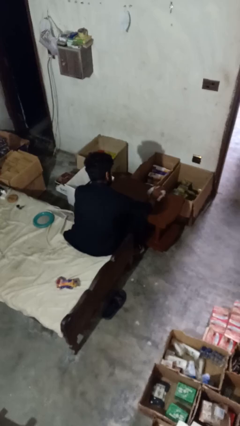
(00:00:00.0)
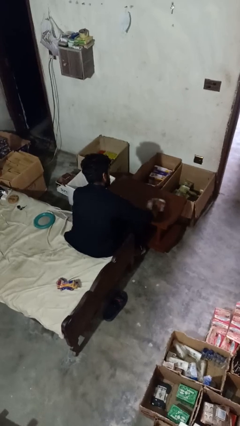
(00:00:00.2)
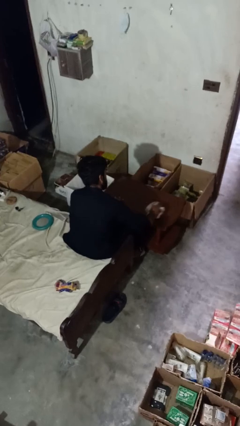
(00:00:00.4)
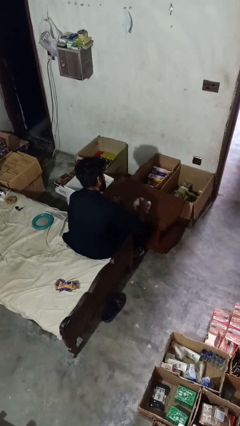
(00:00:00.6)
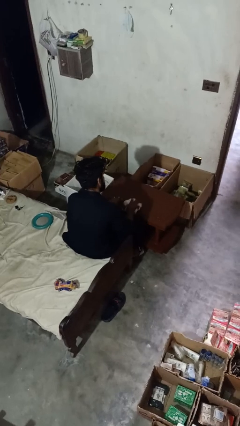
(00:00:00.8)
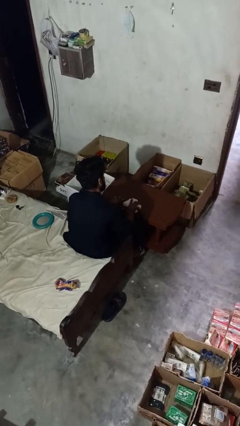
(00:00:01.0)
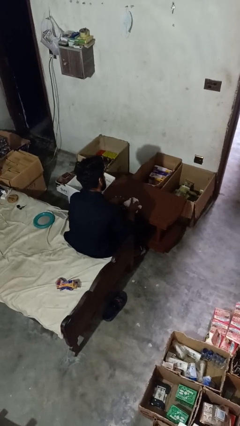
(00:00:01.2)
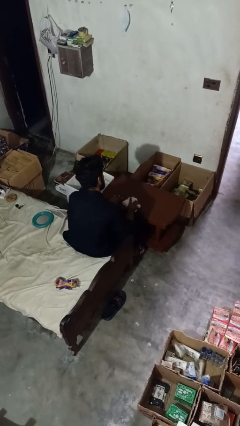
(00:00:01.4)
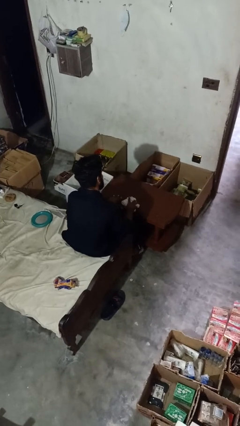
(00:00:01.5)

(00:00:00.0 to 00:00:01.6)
person cleans table with rag

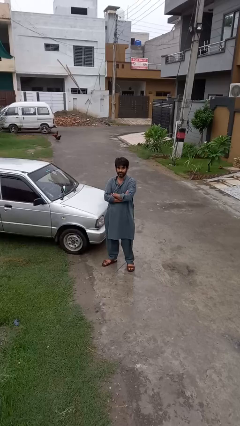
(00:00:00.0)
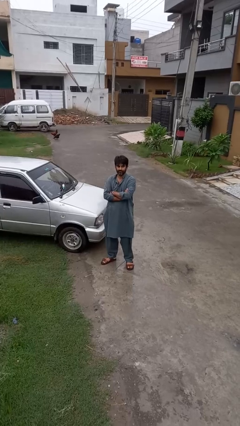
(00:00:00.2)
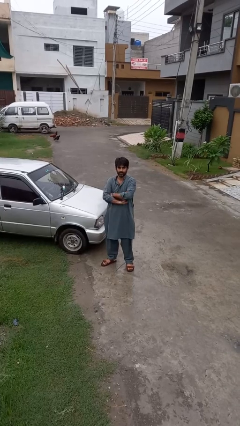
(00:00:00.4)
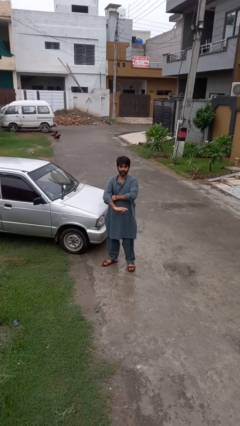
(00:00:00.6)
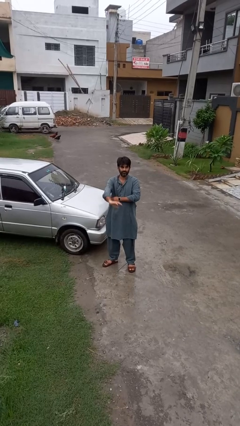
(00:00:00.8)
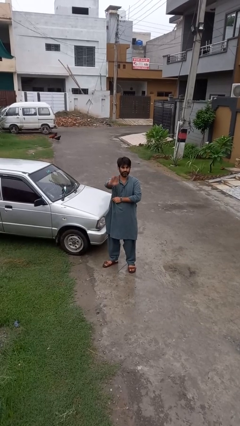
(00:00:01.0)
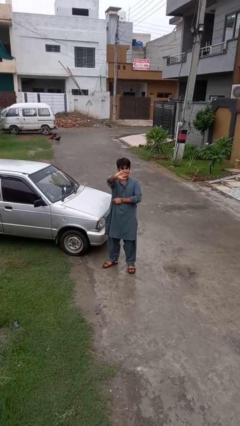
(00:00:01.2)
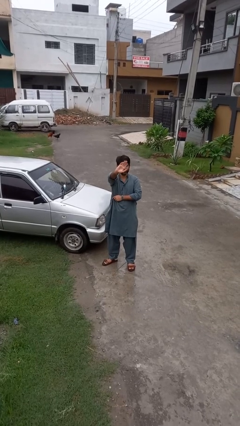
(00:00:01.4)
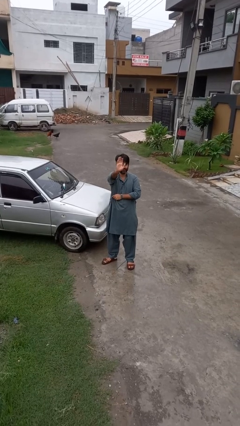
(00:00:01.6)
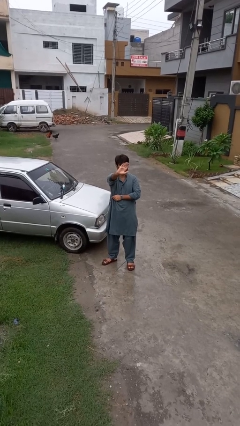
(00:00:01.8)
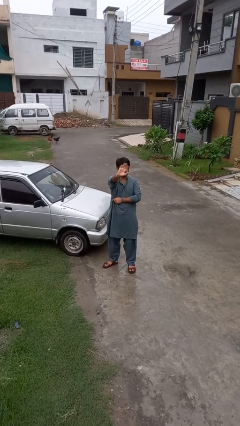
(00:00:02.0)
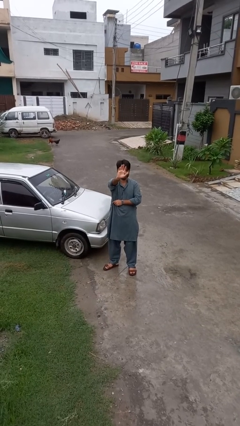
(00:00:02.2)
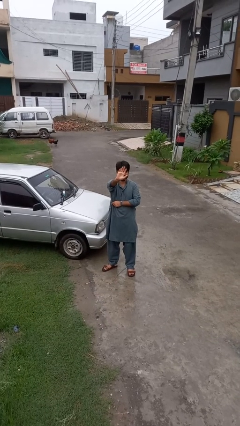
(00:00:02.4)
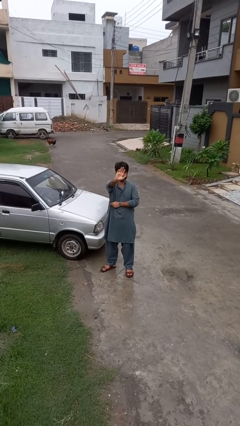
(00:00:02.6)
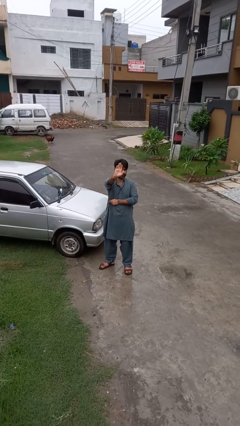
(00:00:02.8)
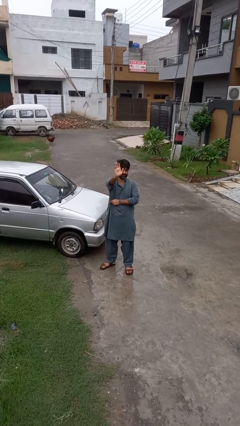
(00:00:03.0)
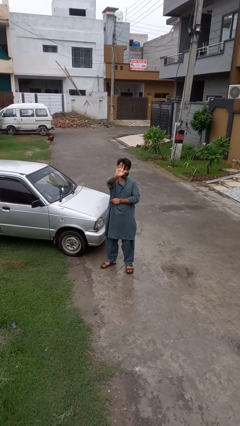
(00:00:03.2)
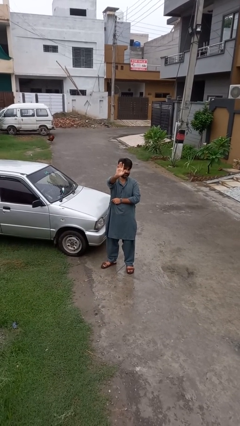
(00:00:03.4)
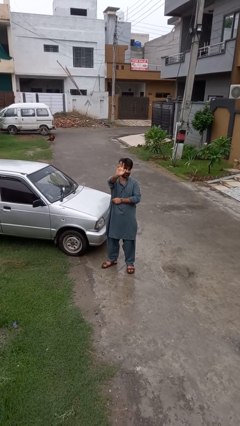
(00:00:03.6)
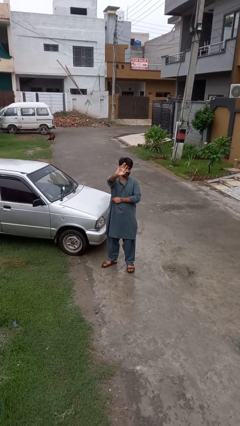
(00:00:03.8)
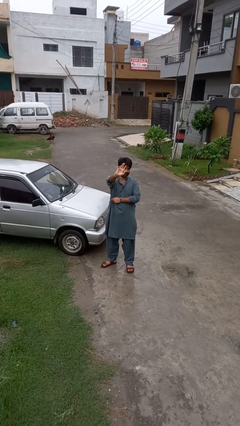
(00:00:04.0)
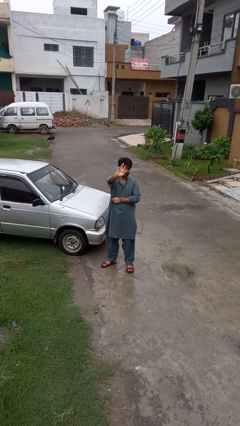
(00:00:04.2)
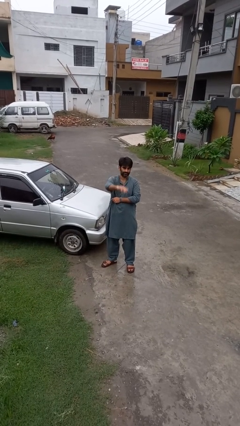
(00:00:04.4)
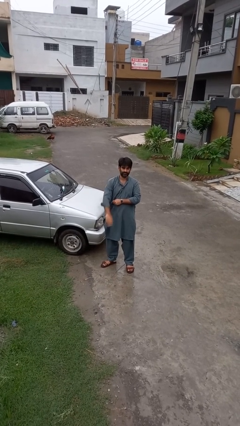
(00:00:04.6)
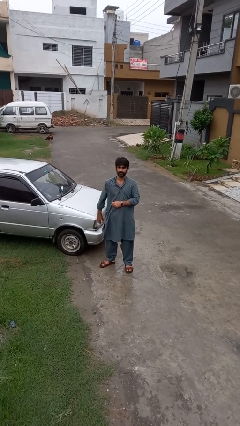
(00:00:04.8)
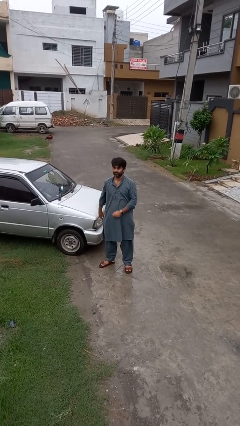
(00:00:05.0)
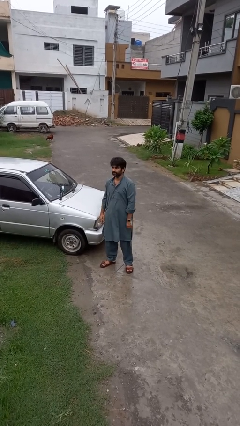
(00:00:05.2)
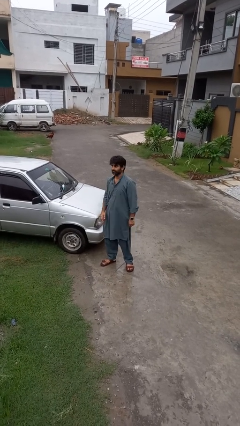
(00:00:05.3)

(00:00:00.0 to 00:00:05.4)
person waves at person

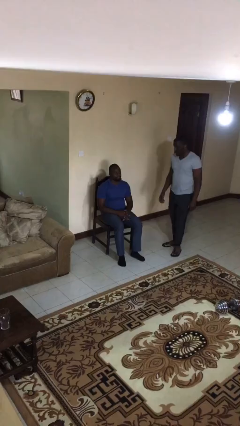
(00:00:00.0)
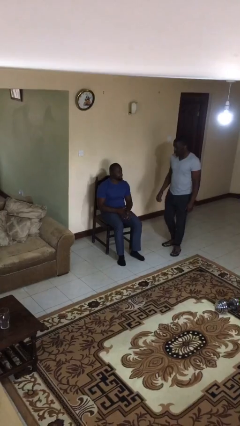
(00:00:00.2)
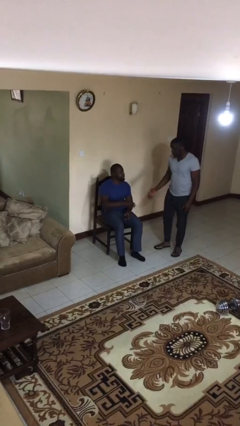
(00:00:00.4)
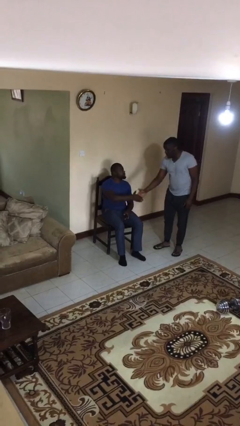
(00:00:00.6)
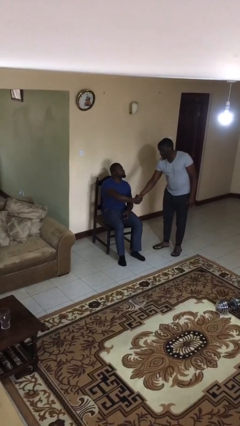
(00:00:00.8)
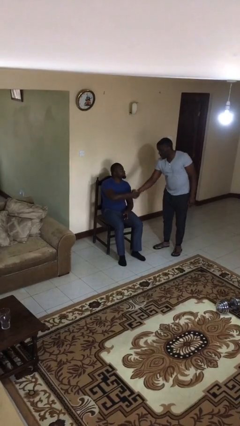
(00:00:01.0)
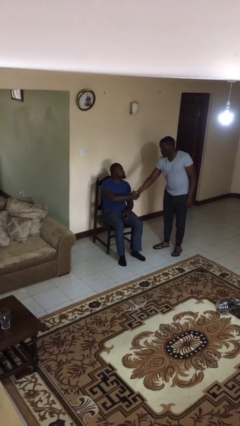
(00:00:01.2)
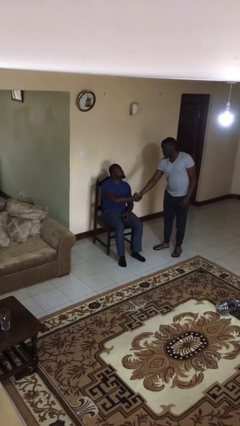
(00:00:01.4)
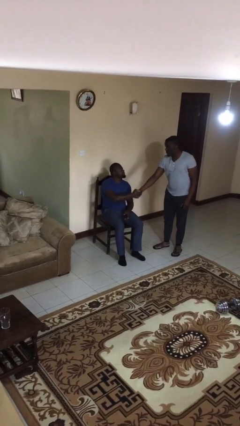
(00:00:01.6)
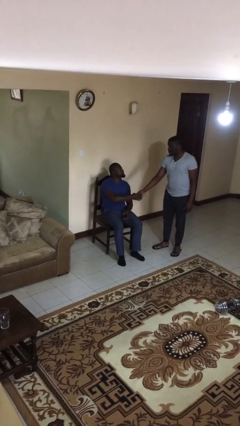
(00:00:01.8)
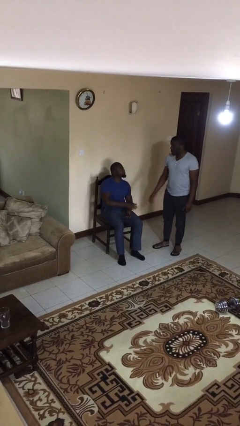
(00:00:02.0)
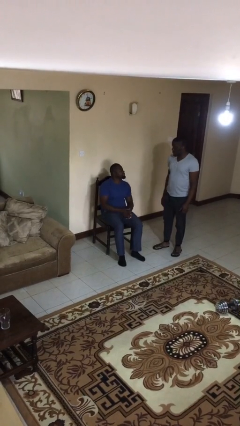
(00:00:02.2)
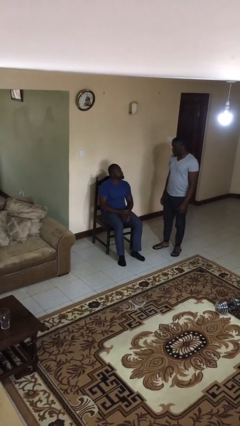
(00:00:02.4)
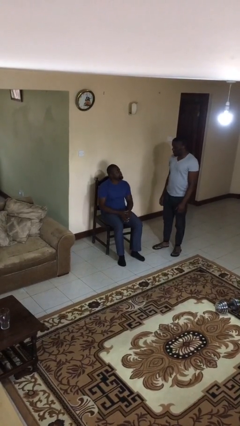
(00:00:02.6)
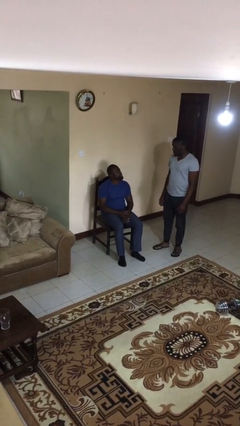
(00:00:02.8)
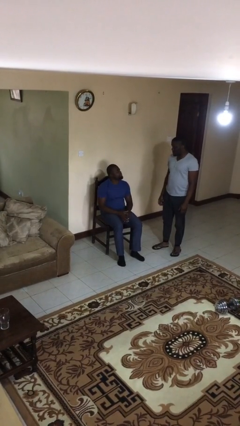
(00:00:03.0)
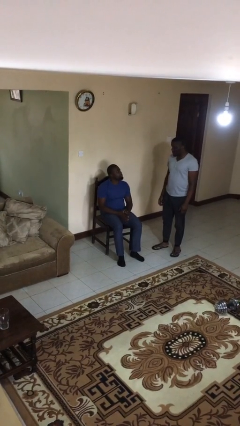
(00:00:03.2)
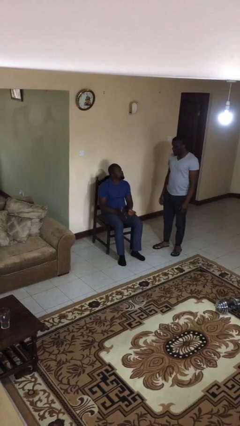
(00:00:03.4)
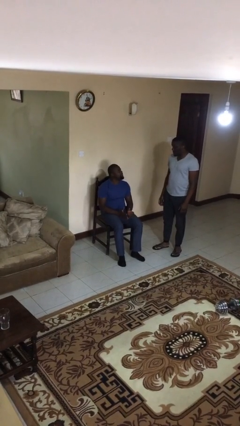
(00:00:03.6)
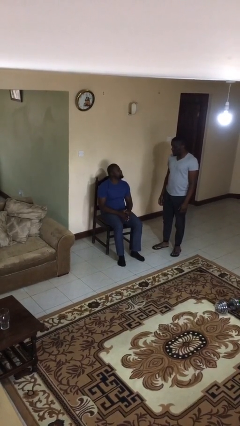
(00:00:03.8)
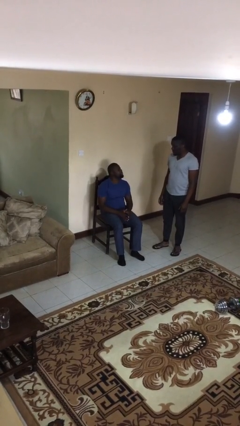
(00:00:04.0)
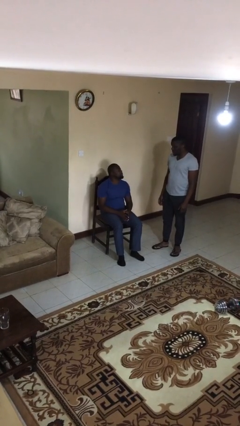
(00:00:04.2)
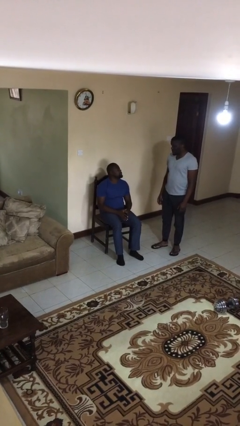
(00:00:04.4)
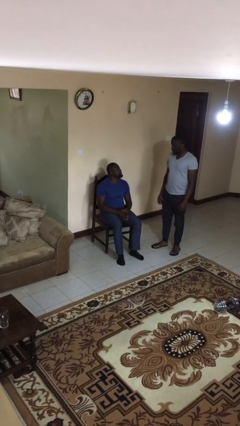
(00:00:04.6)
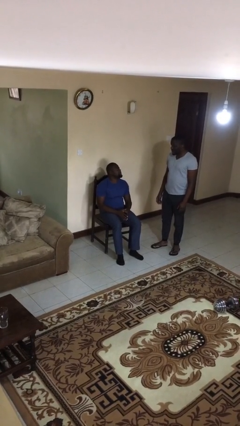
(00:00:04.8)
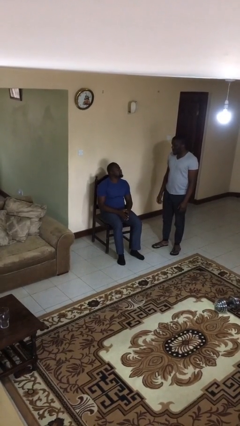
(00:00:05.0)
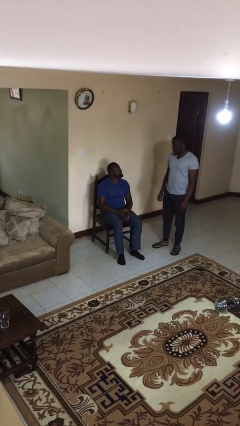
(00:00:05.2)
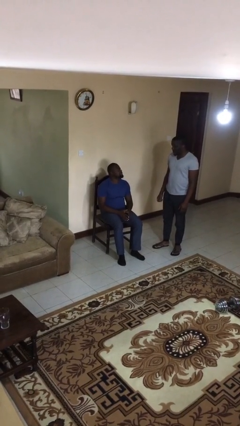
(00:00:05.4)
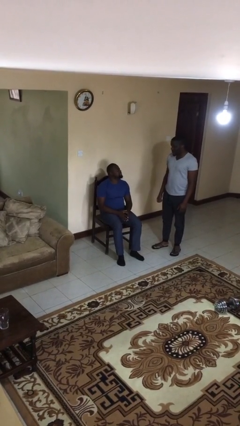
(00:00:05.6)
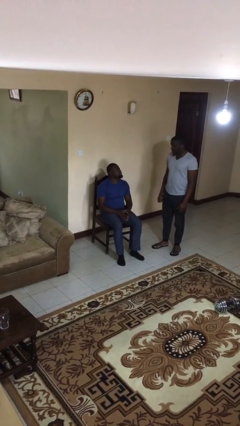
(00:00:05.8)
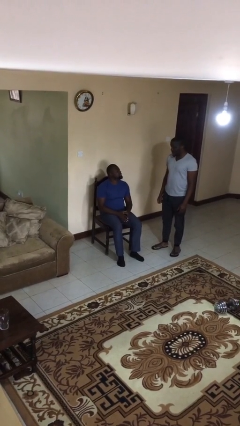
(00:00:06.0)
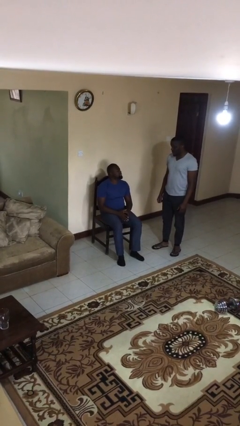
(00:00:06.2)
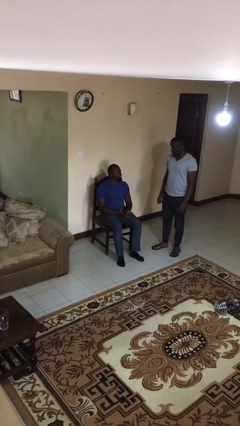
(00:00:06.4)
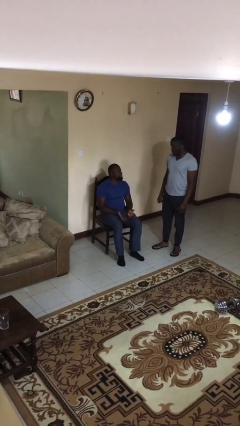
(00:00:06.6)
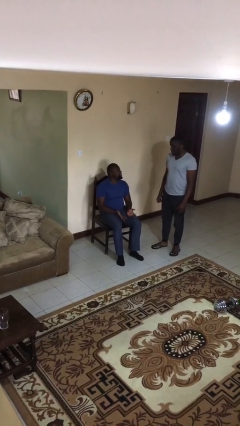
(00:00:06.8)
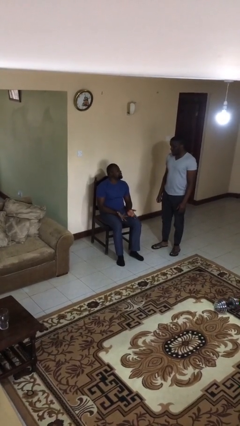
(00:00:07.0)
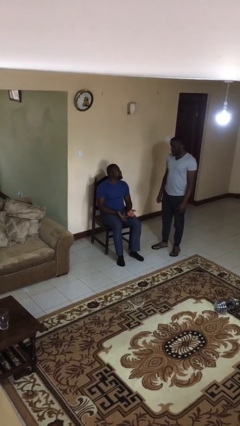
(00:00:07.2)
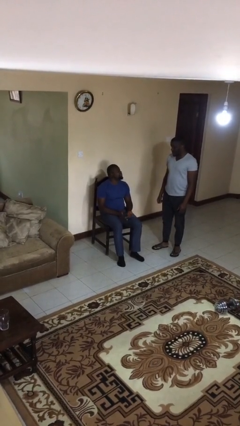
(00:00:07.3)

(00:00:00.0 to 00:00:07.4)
person shakes hand

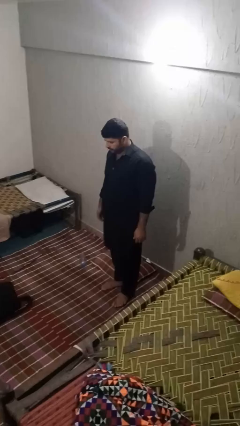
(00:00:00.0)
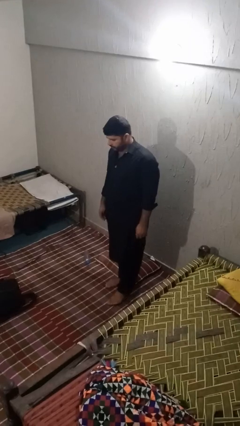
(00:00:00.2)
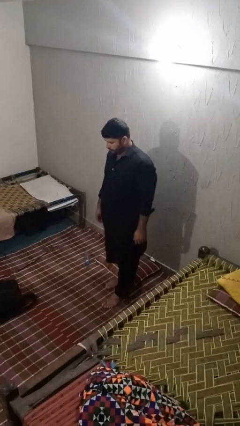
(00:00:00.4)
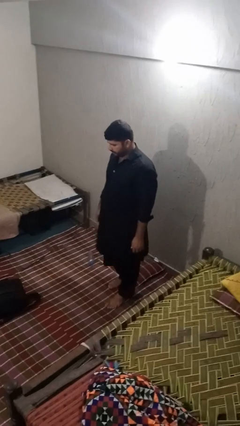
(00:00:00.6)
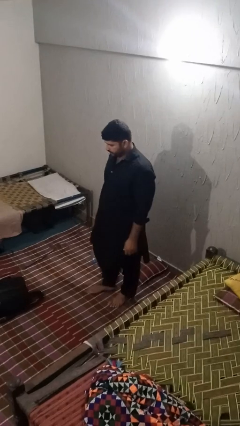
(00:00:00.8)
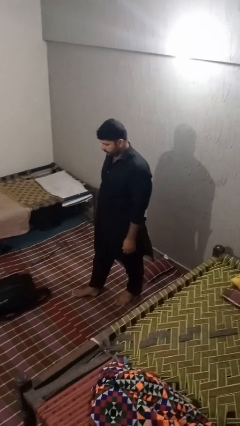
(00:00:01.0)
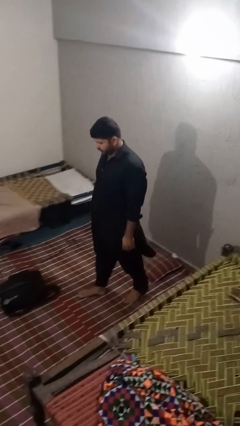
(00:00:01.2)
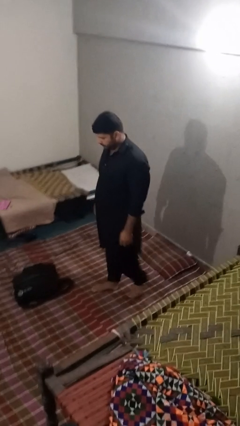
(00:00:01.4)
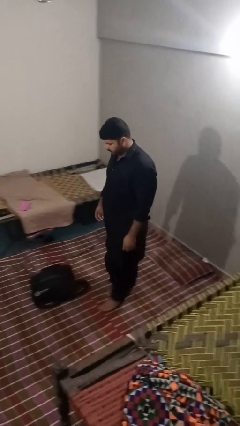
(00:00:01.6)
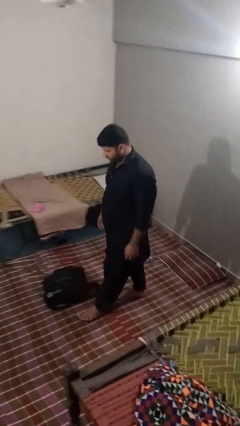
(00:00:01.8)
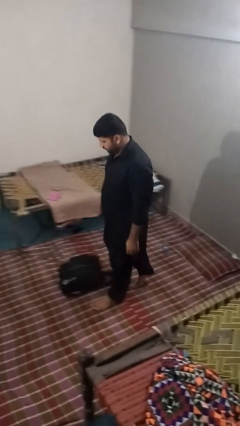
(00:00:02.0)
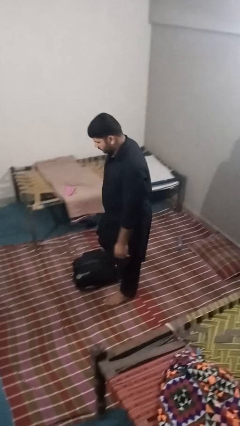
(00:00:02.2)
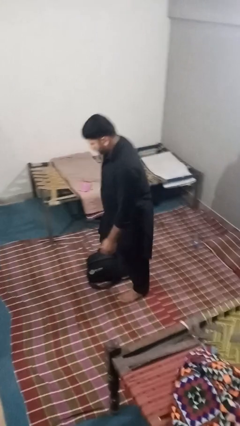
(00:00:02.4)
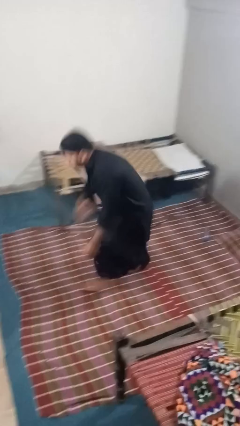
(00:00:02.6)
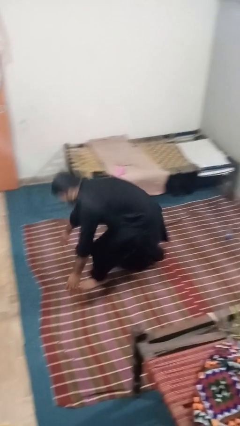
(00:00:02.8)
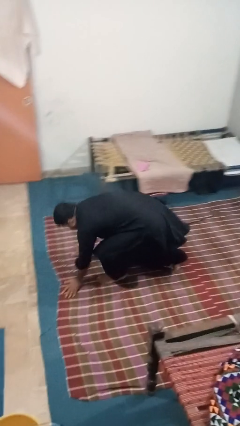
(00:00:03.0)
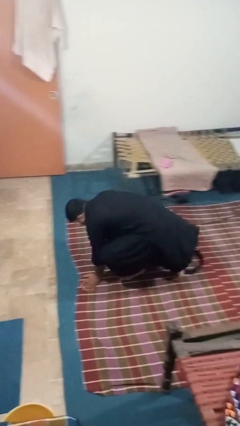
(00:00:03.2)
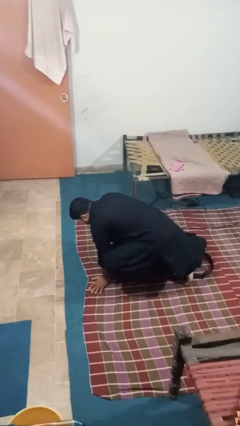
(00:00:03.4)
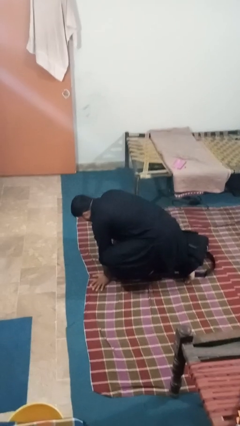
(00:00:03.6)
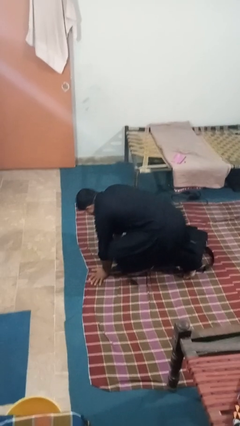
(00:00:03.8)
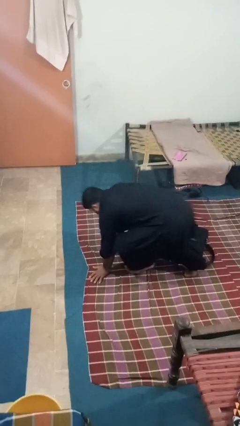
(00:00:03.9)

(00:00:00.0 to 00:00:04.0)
person trips on object on floor
